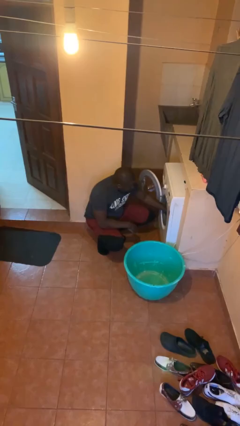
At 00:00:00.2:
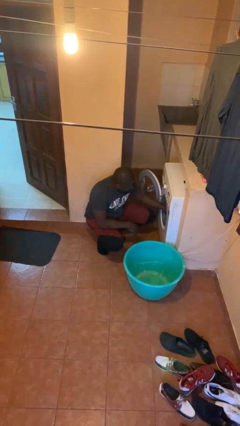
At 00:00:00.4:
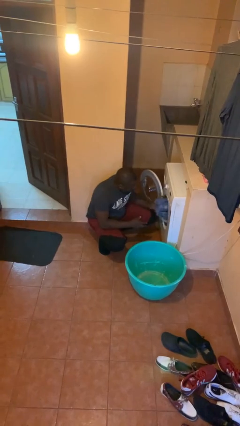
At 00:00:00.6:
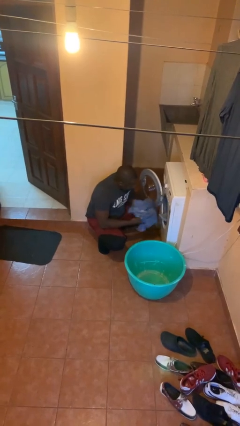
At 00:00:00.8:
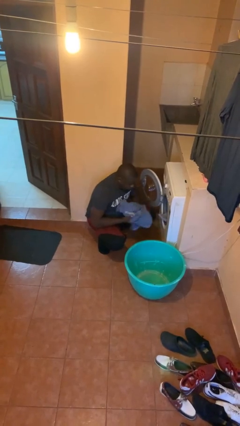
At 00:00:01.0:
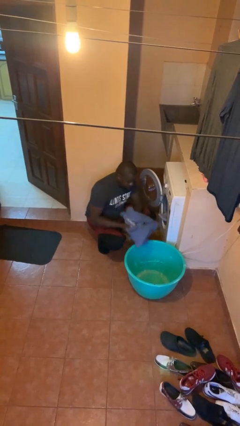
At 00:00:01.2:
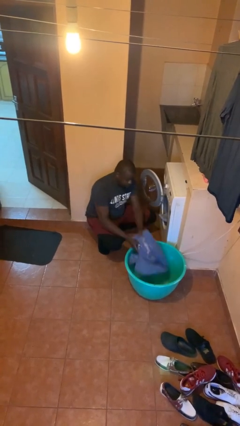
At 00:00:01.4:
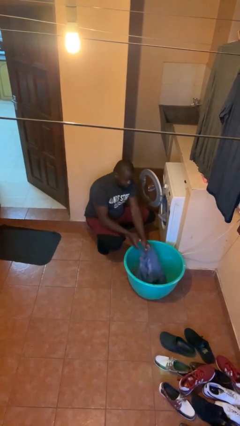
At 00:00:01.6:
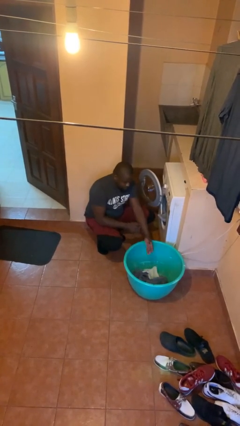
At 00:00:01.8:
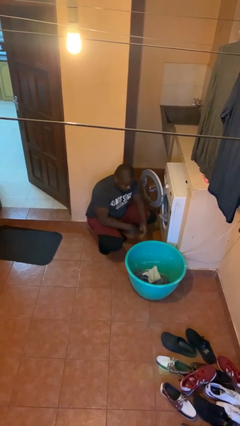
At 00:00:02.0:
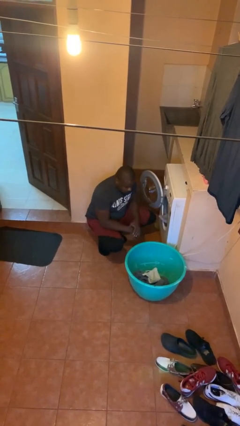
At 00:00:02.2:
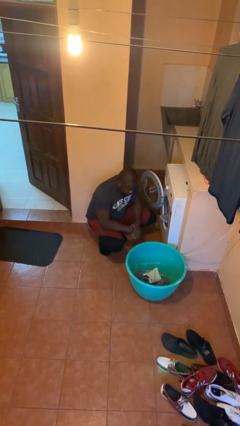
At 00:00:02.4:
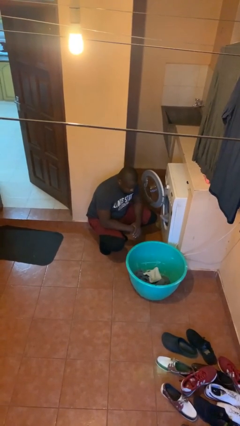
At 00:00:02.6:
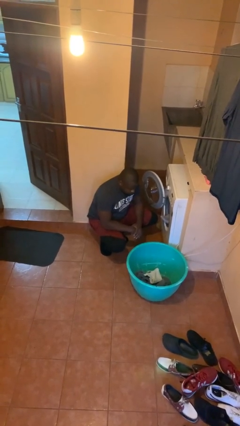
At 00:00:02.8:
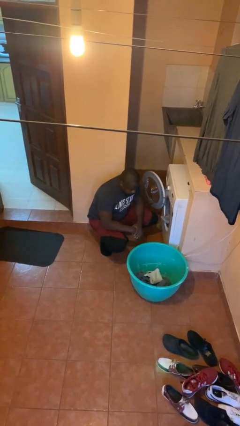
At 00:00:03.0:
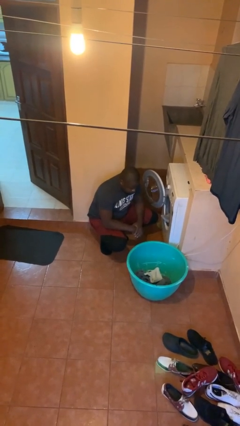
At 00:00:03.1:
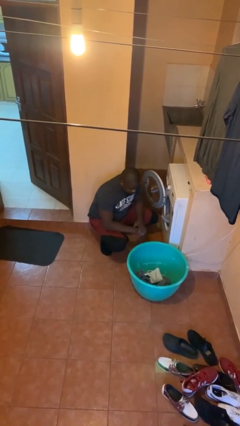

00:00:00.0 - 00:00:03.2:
person unloads clotheswasher

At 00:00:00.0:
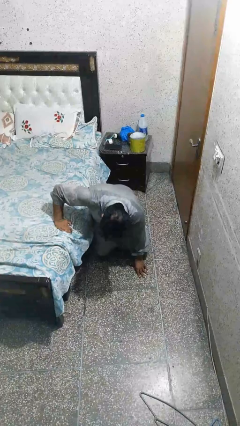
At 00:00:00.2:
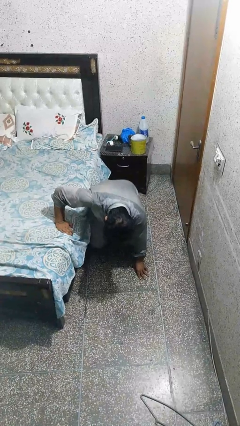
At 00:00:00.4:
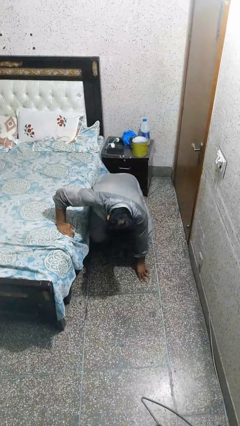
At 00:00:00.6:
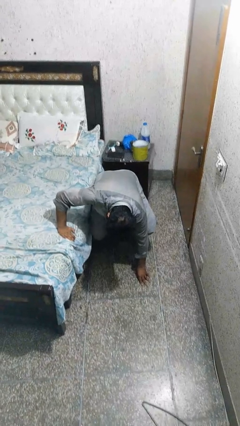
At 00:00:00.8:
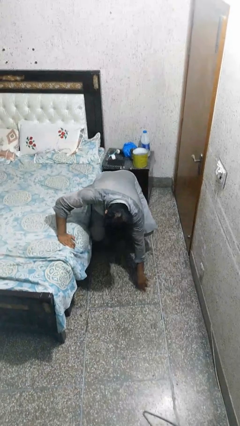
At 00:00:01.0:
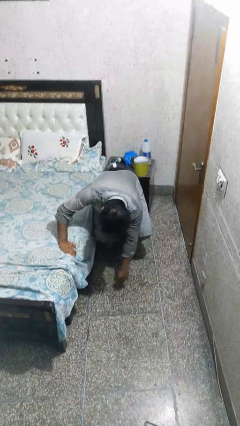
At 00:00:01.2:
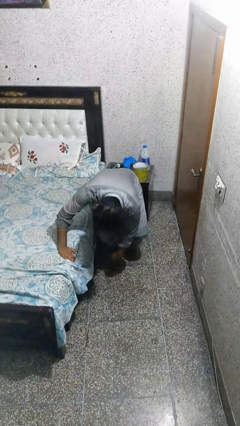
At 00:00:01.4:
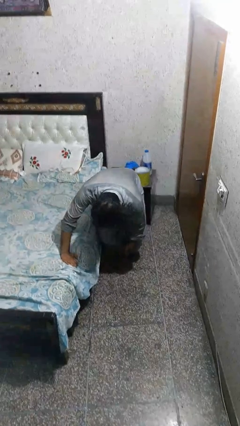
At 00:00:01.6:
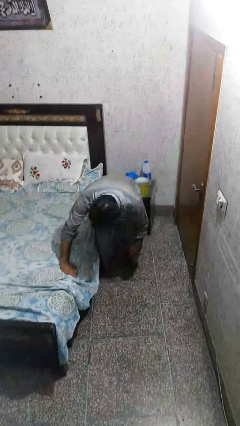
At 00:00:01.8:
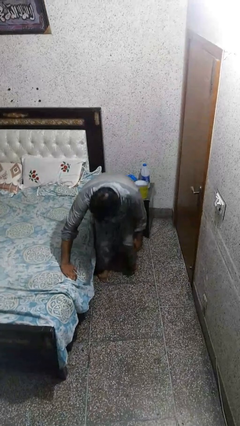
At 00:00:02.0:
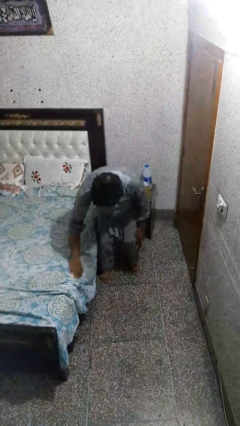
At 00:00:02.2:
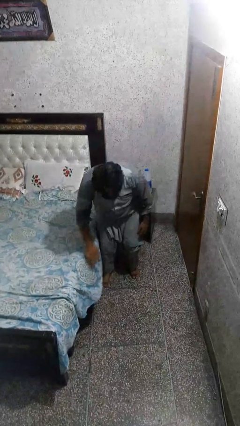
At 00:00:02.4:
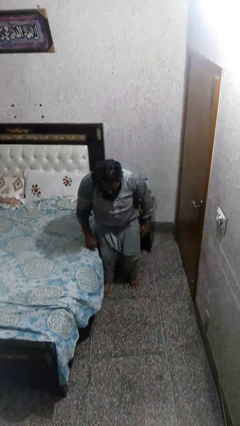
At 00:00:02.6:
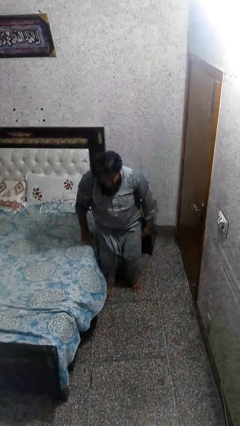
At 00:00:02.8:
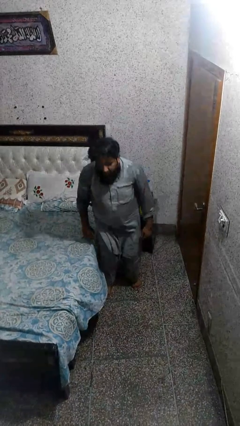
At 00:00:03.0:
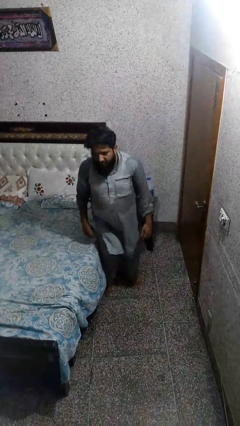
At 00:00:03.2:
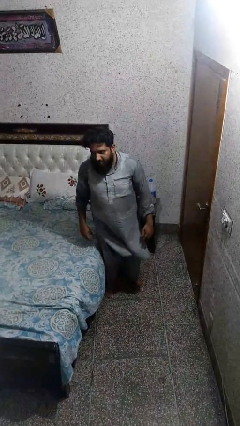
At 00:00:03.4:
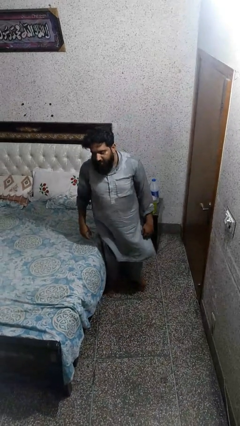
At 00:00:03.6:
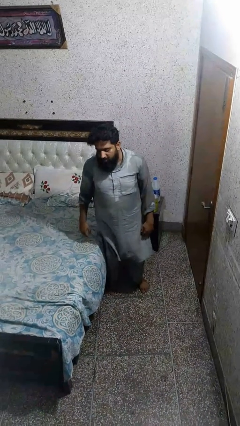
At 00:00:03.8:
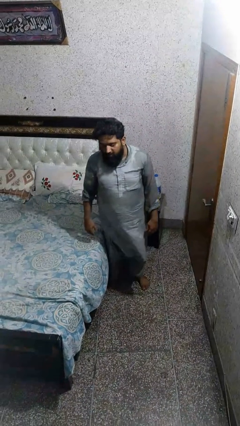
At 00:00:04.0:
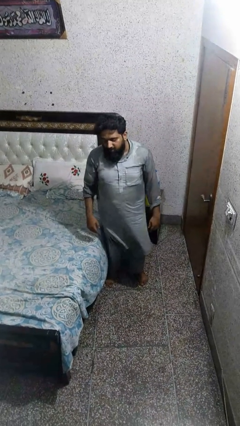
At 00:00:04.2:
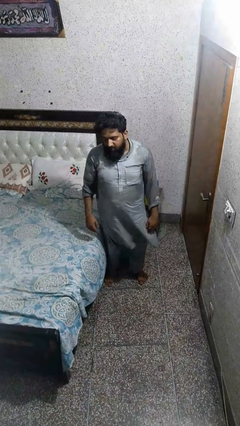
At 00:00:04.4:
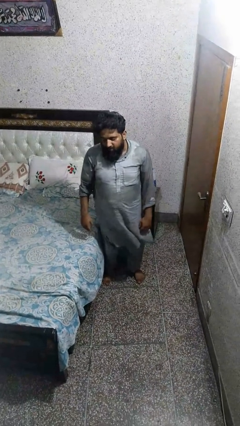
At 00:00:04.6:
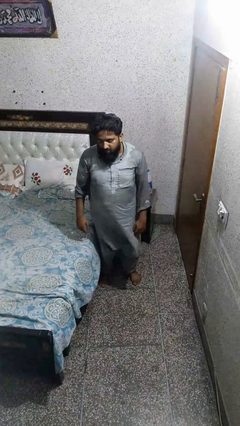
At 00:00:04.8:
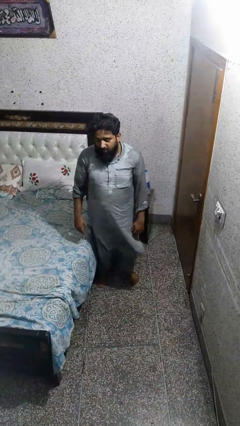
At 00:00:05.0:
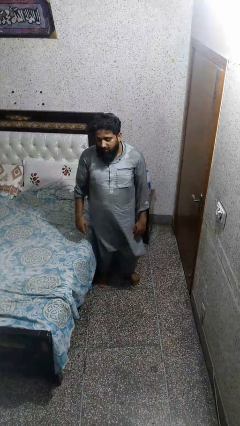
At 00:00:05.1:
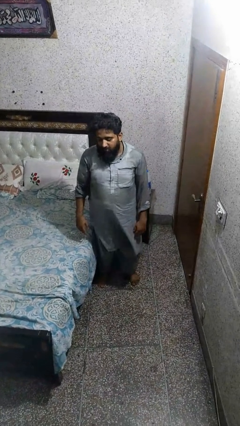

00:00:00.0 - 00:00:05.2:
person stands up from floor

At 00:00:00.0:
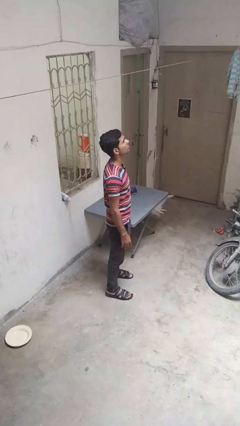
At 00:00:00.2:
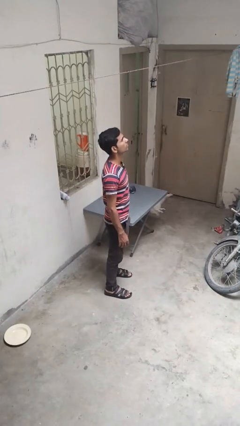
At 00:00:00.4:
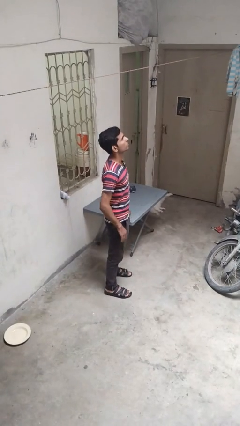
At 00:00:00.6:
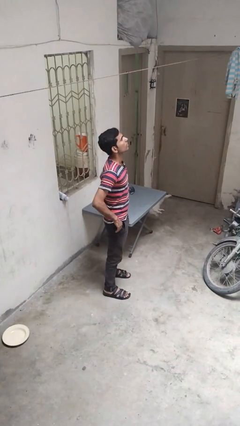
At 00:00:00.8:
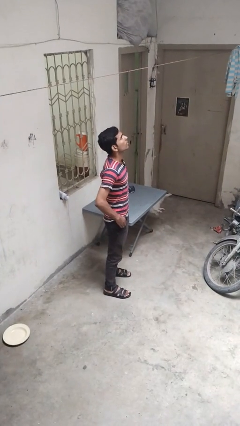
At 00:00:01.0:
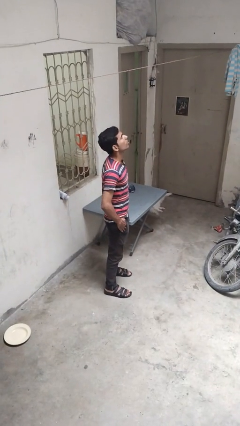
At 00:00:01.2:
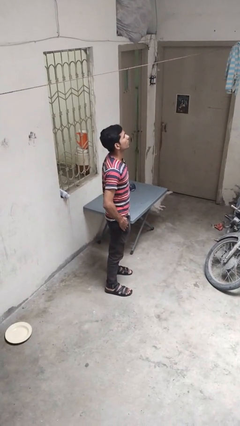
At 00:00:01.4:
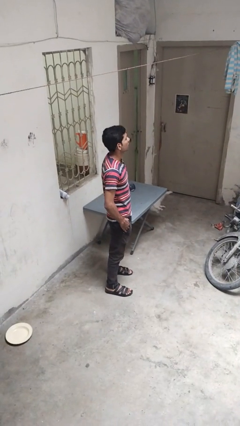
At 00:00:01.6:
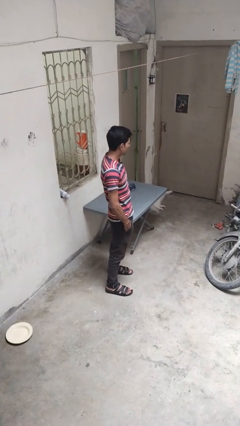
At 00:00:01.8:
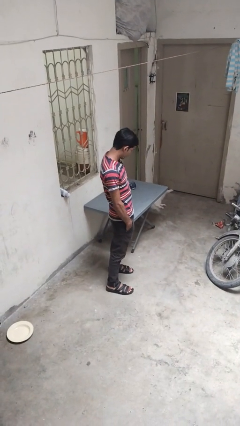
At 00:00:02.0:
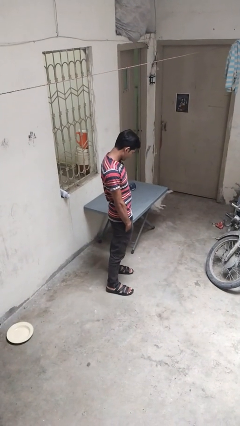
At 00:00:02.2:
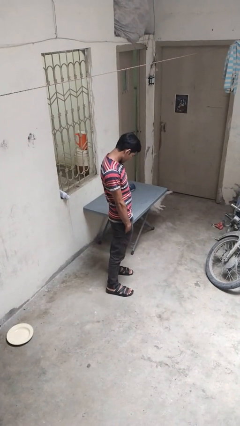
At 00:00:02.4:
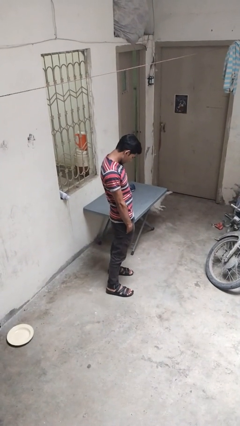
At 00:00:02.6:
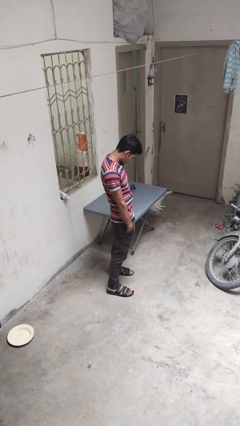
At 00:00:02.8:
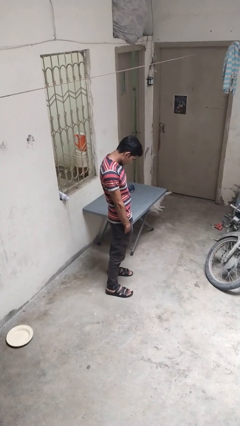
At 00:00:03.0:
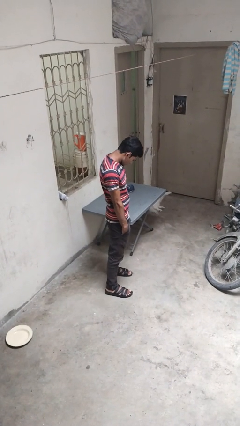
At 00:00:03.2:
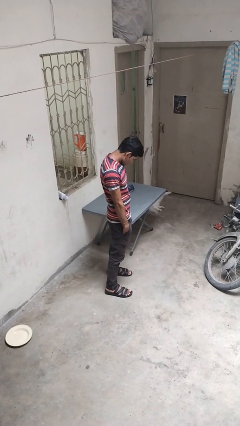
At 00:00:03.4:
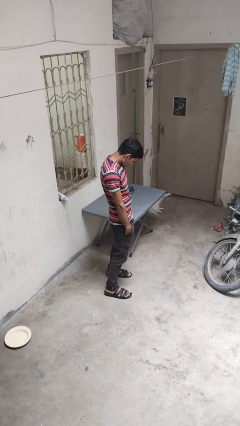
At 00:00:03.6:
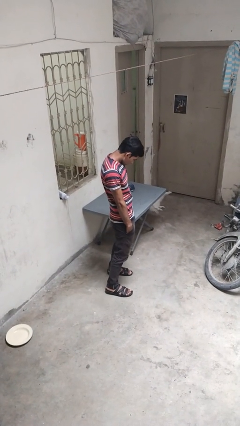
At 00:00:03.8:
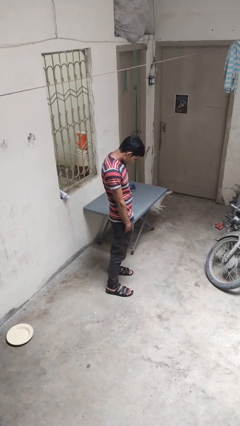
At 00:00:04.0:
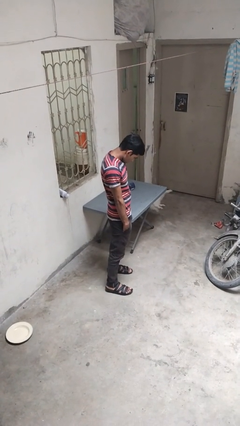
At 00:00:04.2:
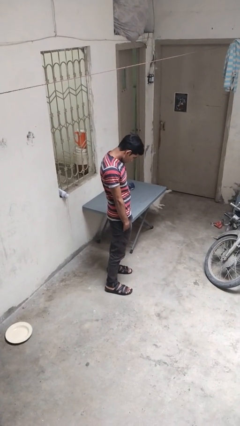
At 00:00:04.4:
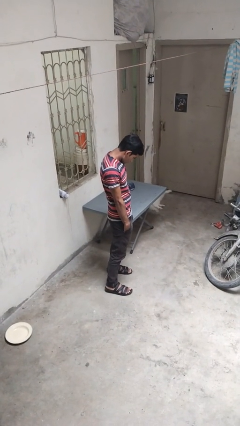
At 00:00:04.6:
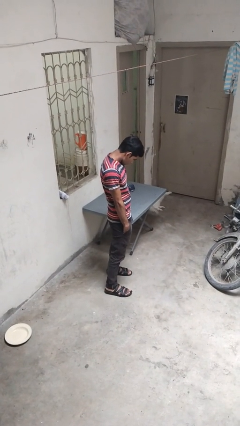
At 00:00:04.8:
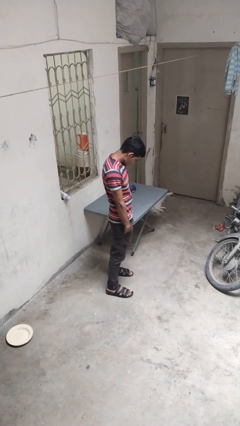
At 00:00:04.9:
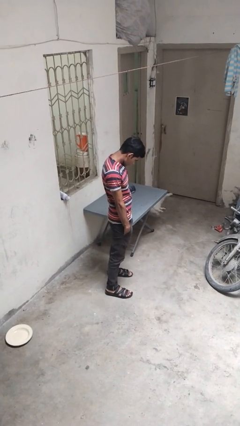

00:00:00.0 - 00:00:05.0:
person puts hands in back pockets

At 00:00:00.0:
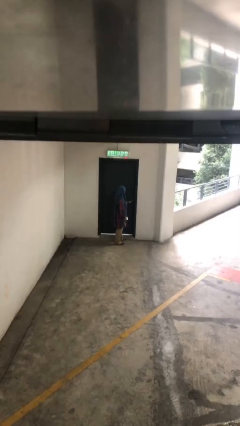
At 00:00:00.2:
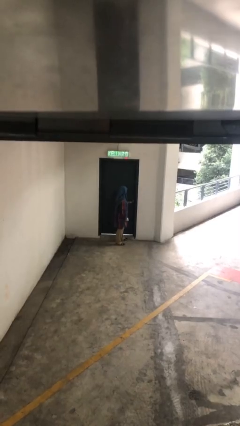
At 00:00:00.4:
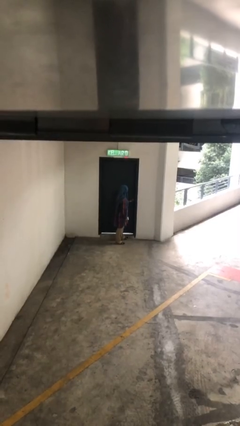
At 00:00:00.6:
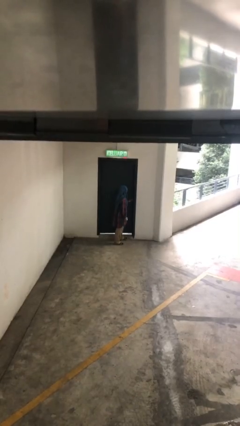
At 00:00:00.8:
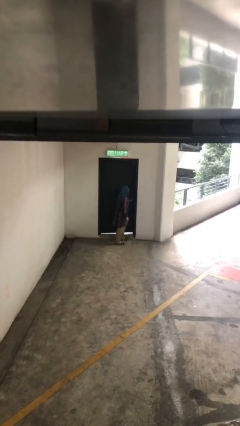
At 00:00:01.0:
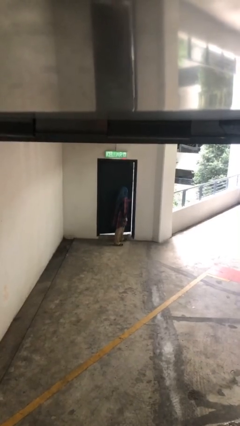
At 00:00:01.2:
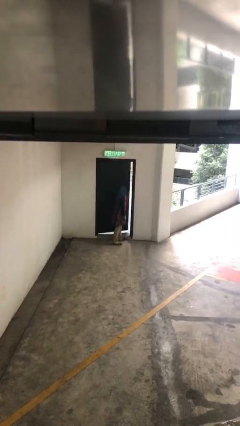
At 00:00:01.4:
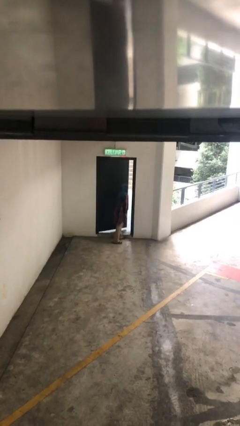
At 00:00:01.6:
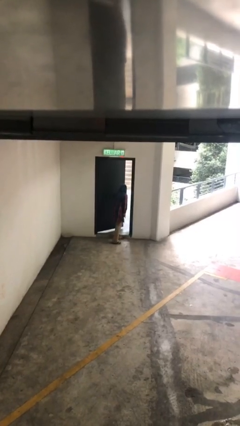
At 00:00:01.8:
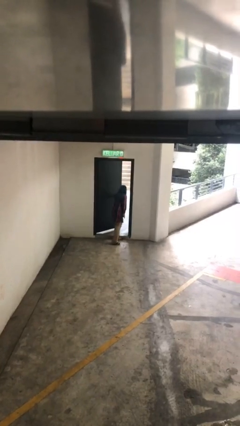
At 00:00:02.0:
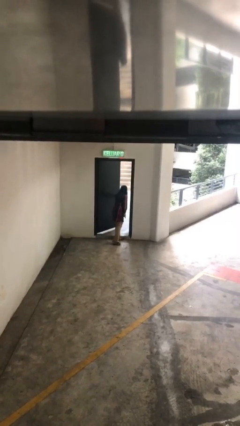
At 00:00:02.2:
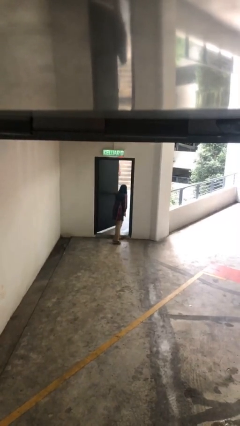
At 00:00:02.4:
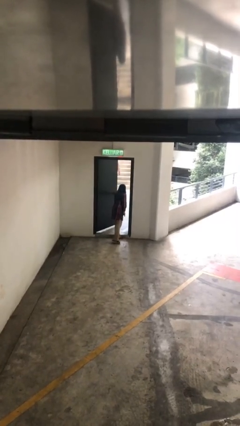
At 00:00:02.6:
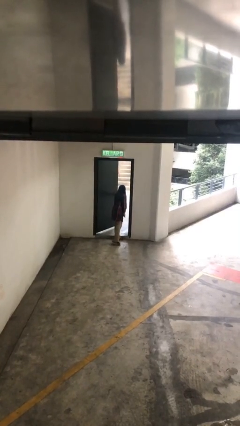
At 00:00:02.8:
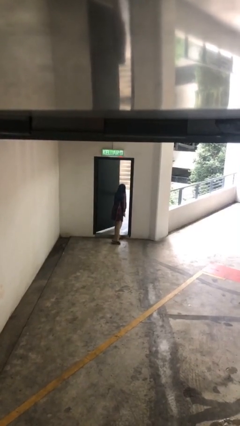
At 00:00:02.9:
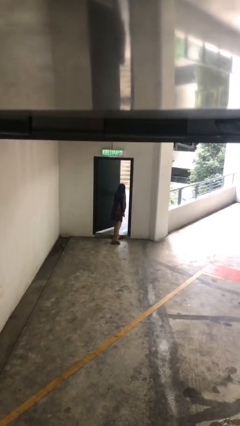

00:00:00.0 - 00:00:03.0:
person opens facility door

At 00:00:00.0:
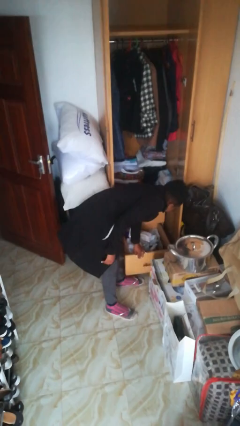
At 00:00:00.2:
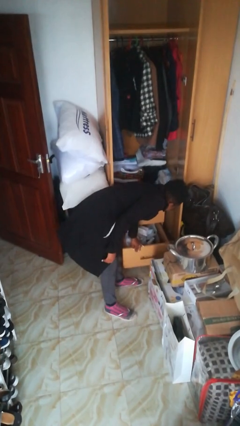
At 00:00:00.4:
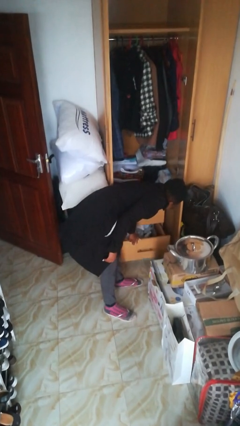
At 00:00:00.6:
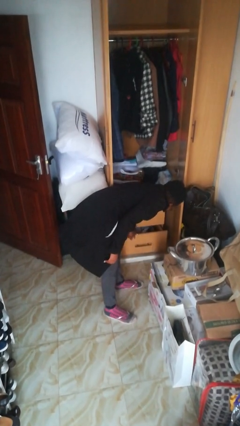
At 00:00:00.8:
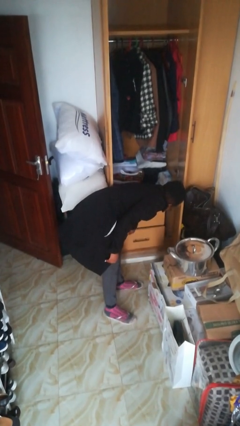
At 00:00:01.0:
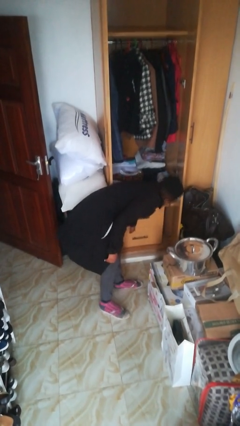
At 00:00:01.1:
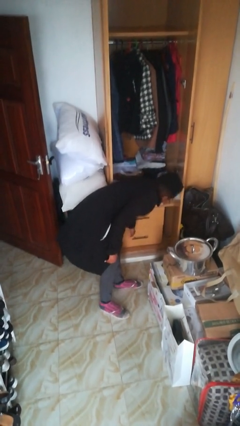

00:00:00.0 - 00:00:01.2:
person closes dresser drawer
